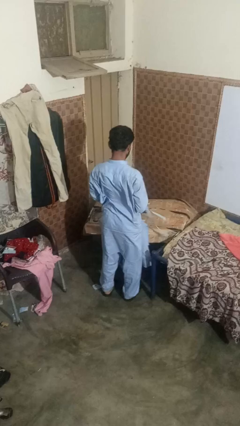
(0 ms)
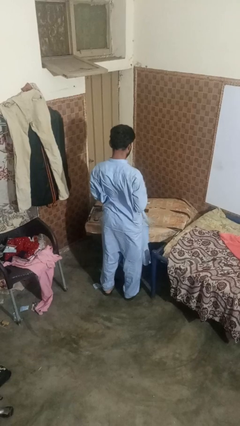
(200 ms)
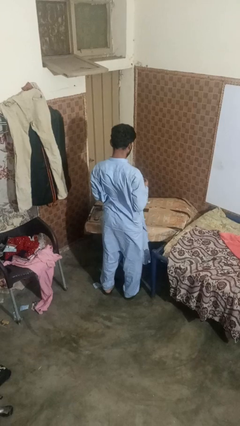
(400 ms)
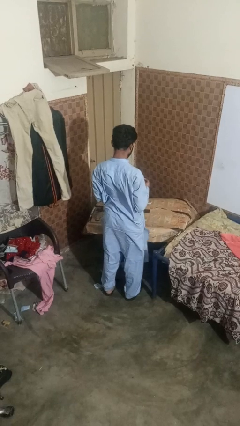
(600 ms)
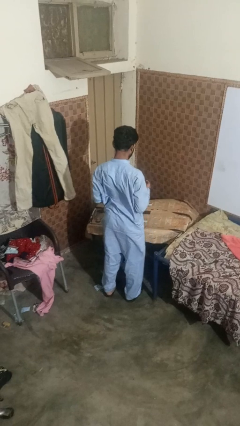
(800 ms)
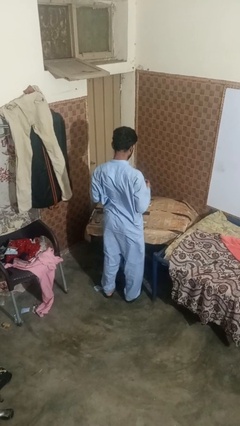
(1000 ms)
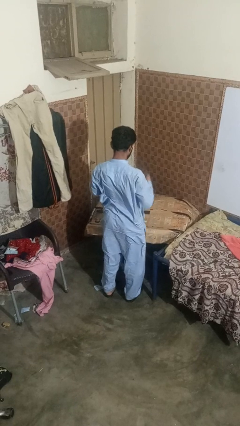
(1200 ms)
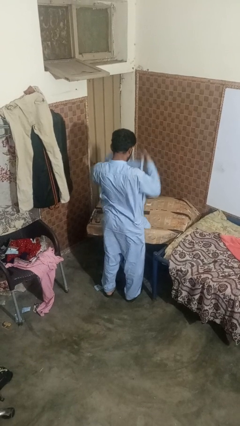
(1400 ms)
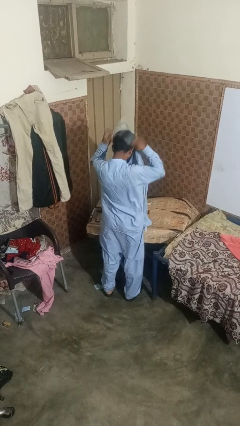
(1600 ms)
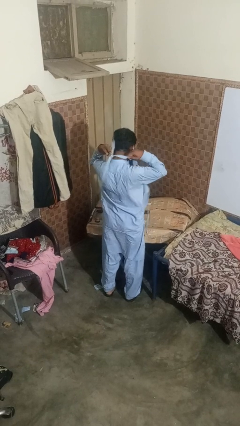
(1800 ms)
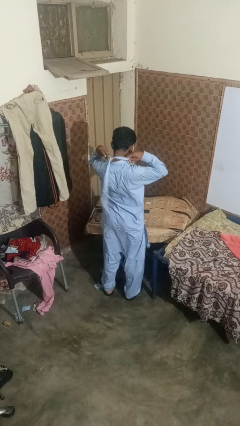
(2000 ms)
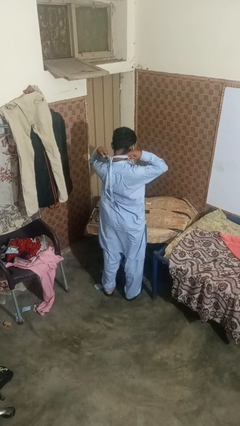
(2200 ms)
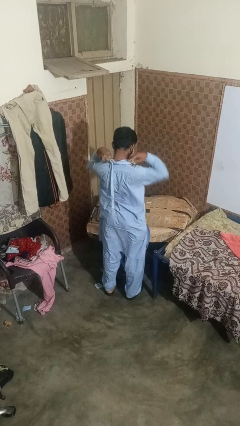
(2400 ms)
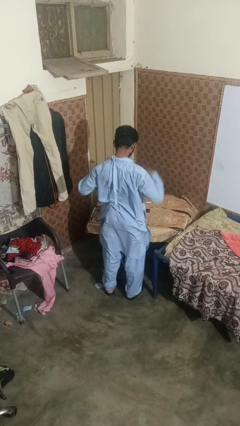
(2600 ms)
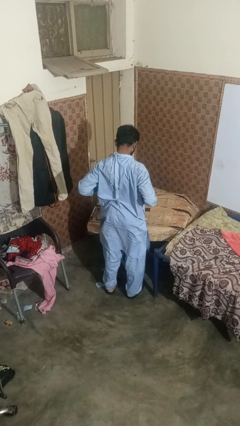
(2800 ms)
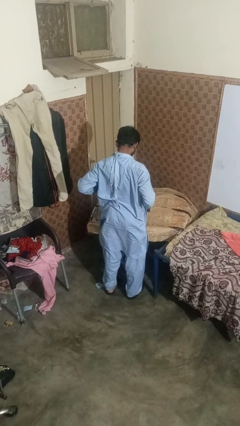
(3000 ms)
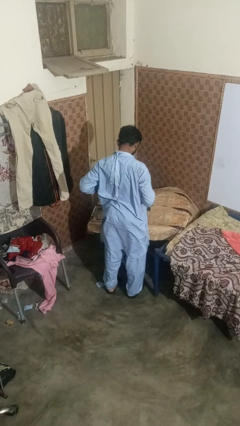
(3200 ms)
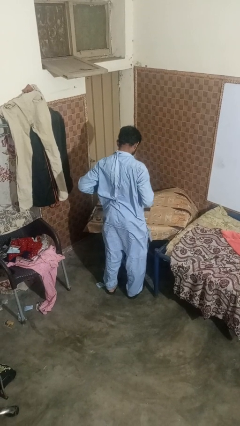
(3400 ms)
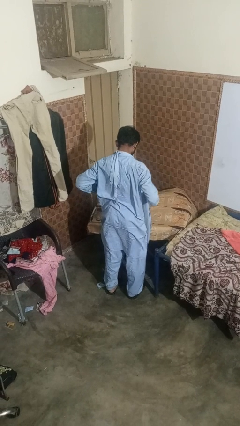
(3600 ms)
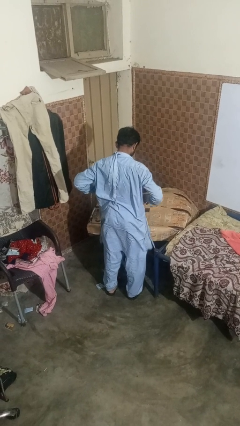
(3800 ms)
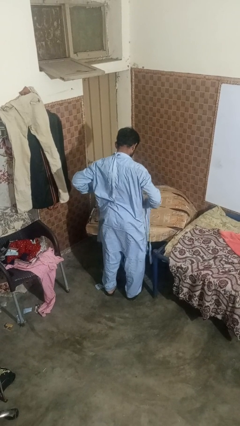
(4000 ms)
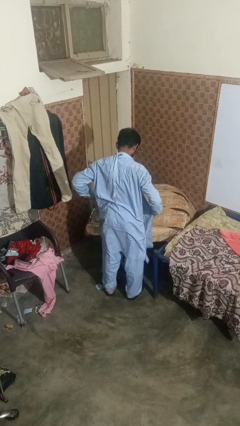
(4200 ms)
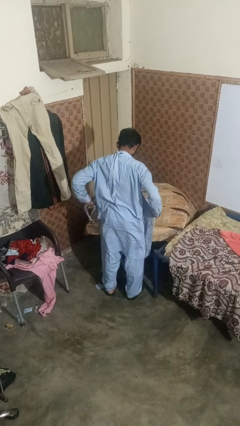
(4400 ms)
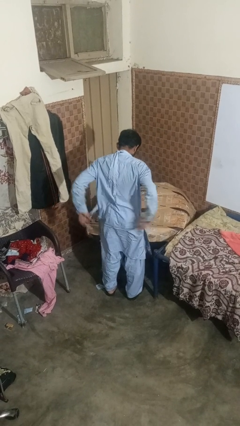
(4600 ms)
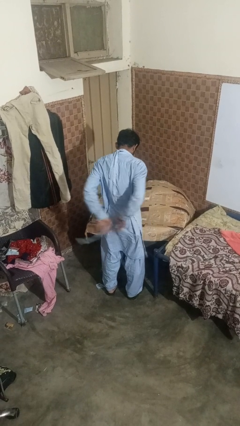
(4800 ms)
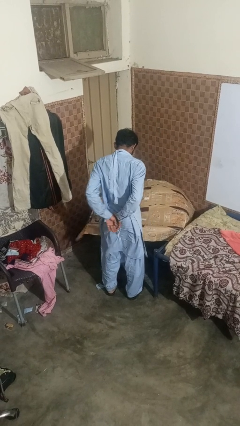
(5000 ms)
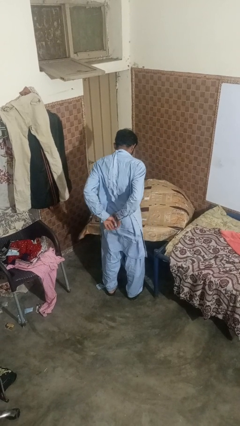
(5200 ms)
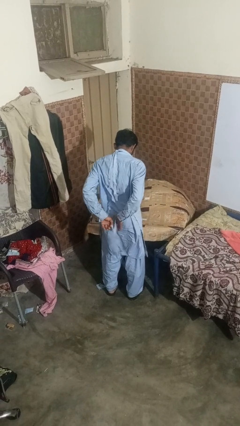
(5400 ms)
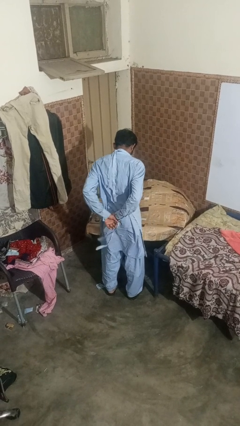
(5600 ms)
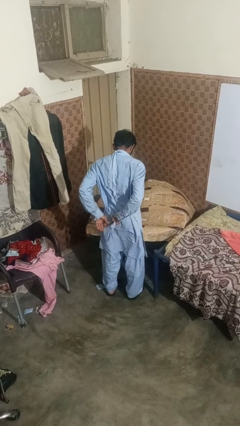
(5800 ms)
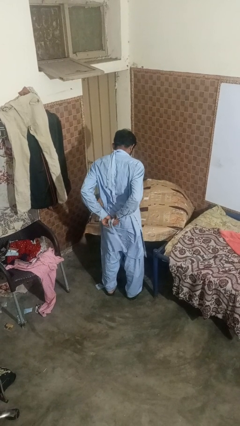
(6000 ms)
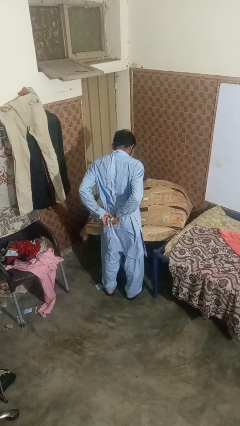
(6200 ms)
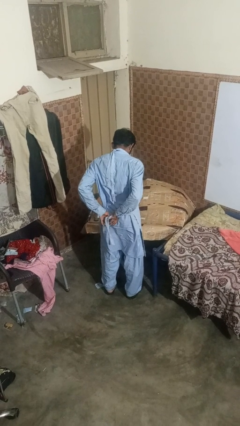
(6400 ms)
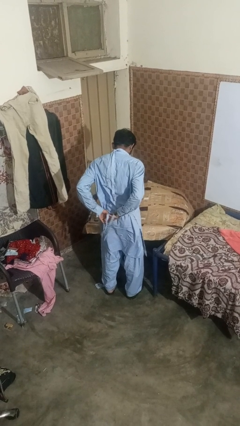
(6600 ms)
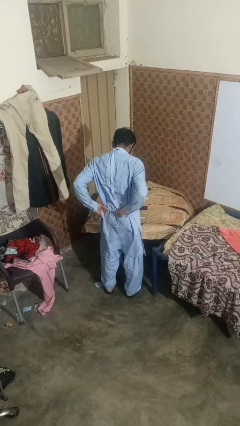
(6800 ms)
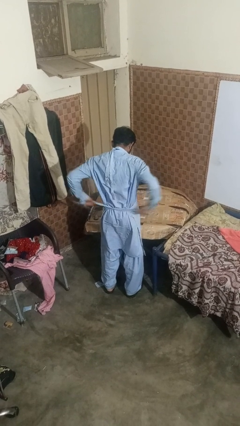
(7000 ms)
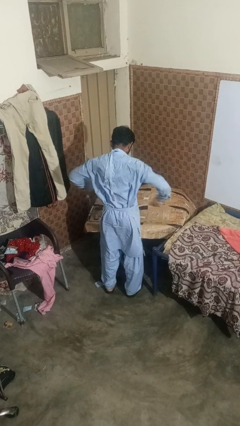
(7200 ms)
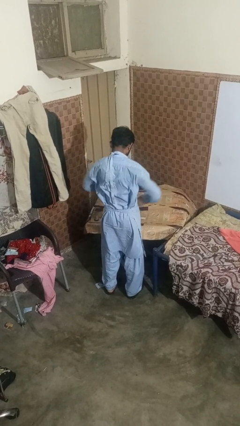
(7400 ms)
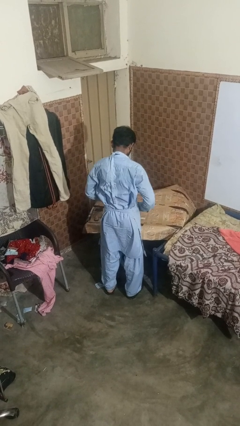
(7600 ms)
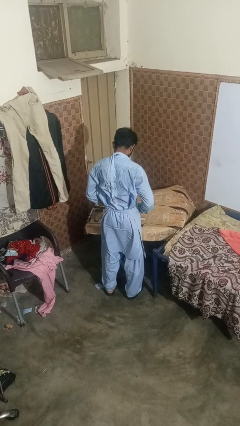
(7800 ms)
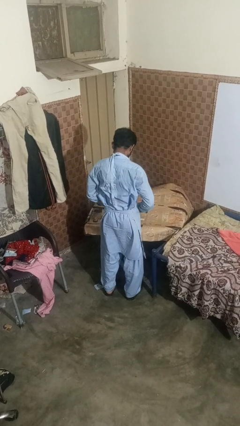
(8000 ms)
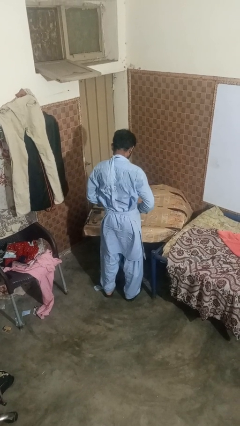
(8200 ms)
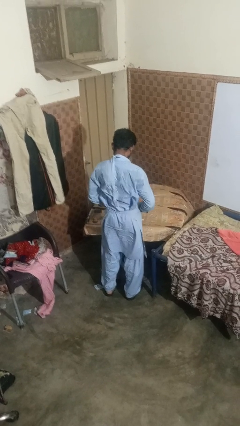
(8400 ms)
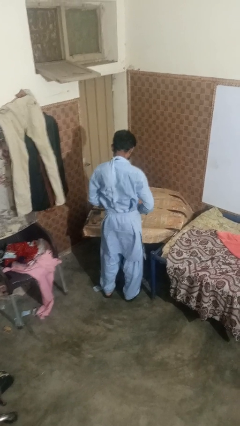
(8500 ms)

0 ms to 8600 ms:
person puts on apron

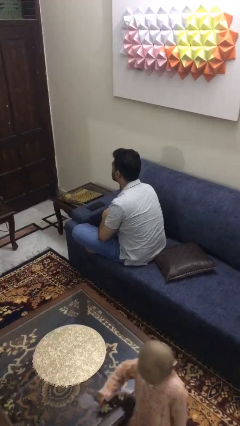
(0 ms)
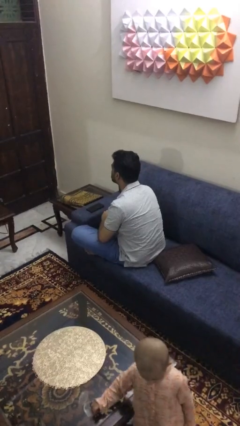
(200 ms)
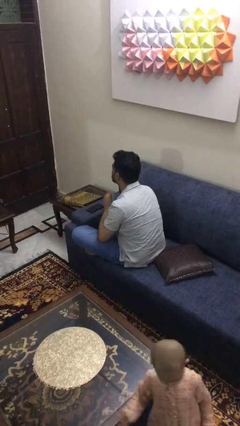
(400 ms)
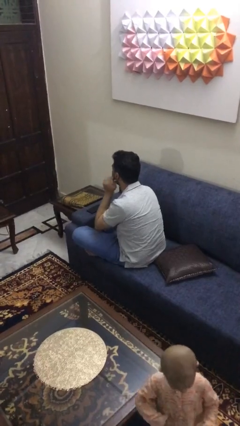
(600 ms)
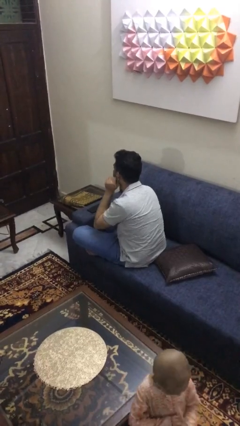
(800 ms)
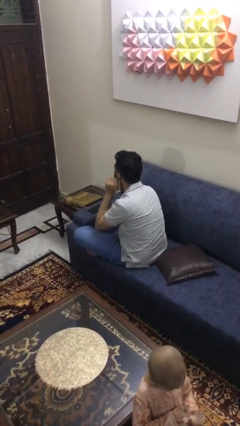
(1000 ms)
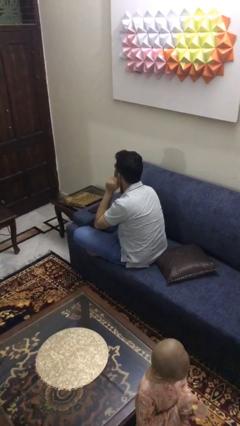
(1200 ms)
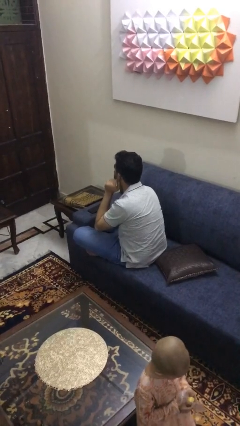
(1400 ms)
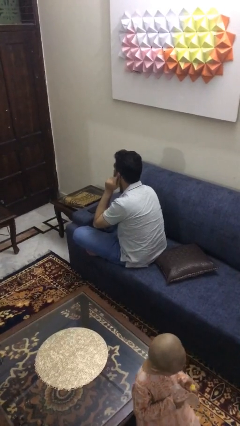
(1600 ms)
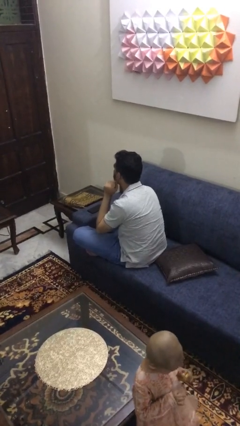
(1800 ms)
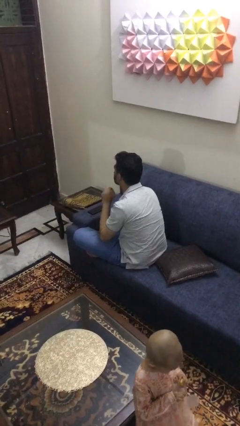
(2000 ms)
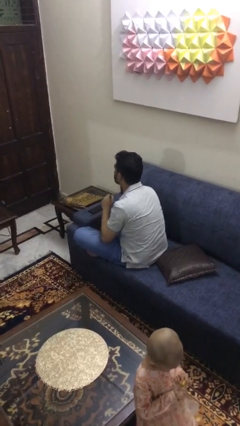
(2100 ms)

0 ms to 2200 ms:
person touches earlobe

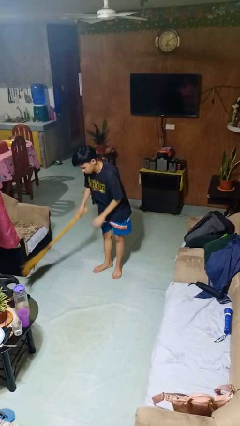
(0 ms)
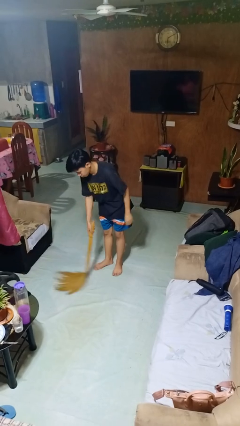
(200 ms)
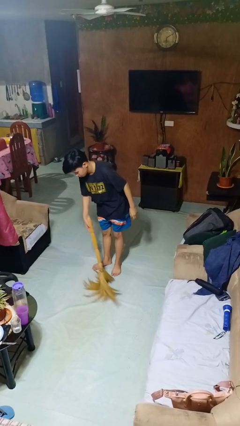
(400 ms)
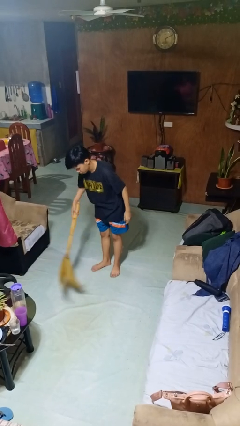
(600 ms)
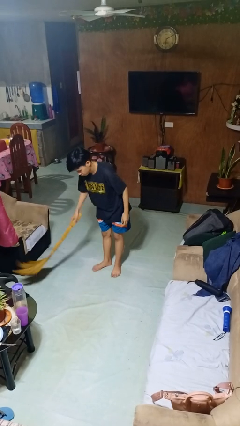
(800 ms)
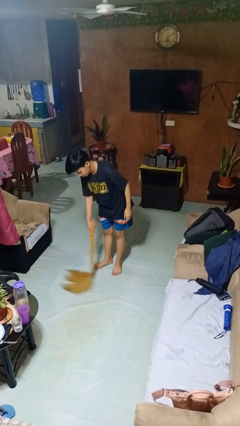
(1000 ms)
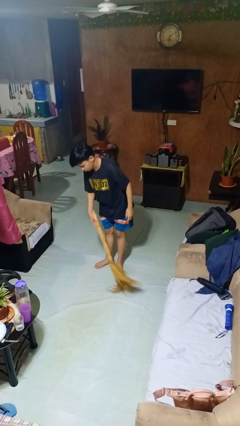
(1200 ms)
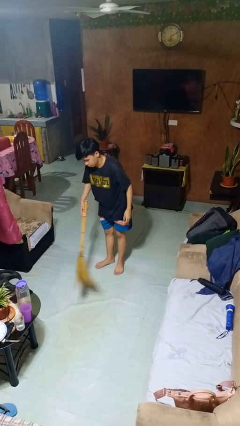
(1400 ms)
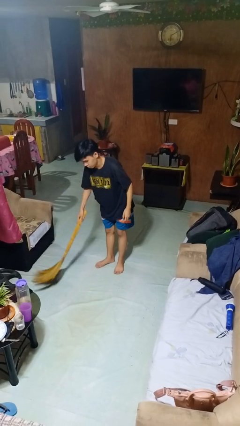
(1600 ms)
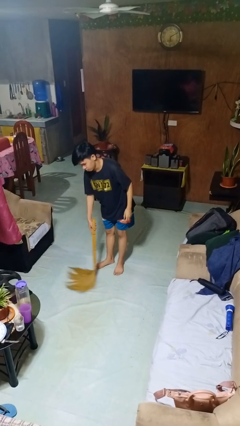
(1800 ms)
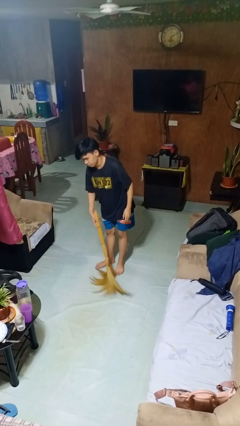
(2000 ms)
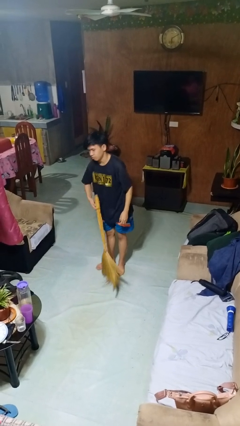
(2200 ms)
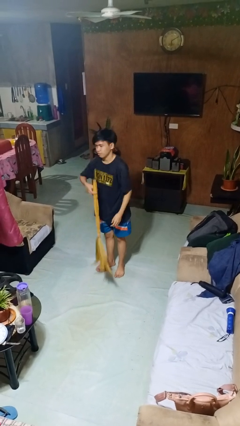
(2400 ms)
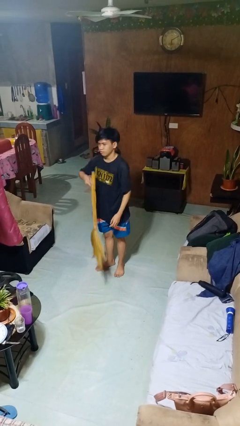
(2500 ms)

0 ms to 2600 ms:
person sweeps floor

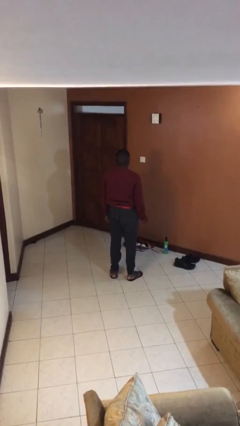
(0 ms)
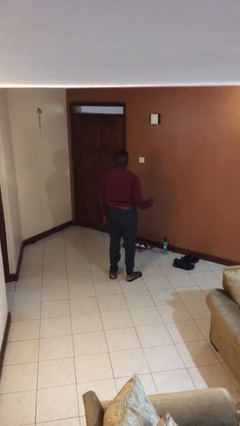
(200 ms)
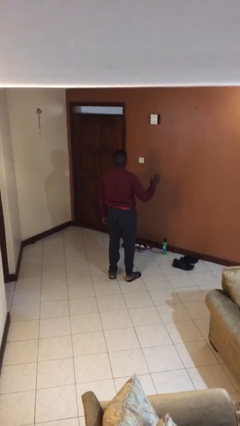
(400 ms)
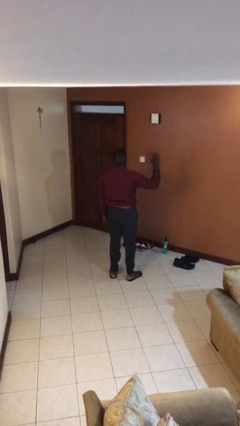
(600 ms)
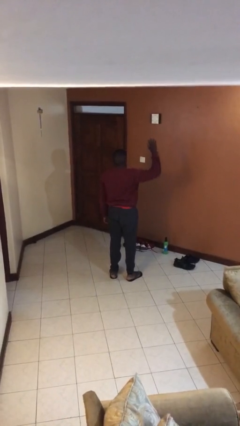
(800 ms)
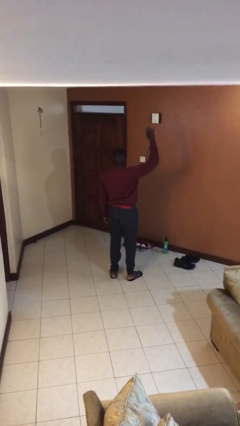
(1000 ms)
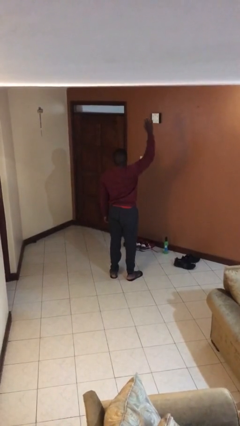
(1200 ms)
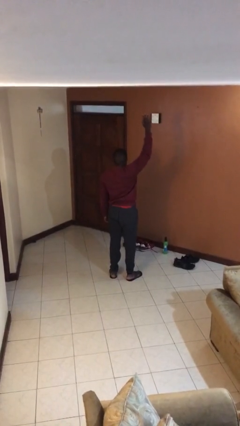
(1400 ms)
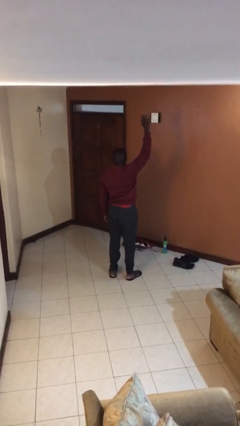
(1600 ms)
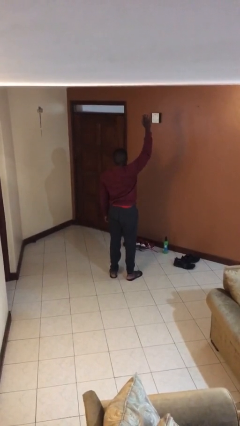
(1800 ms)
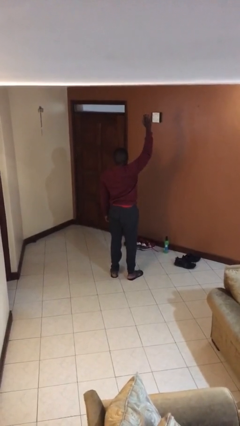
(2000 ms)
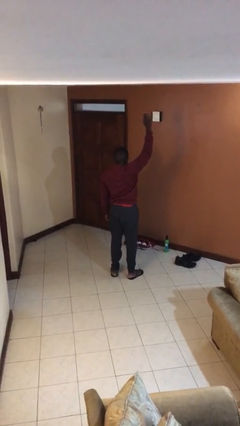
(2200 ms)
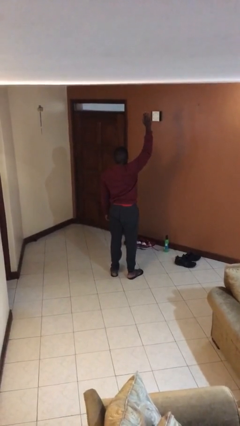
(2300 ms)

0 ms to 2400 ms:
person gestures raise hand

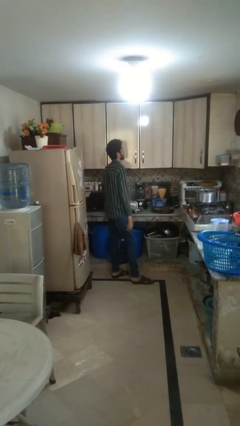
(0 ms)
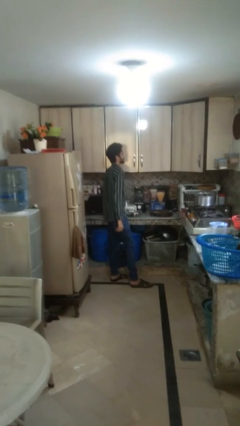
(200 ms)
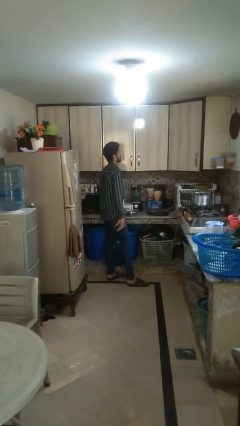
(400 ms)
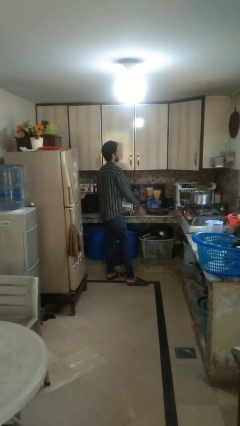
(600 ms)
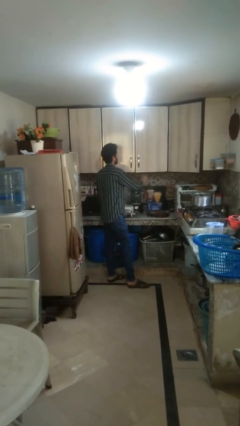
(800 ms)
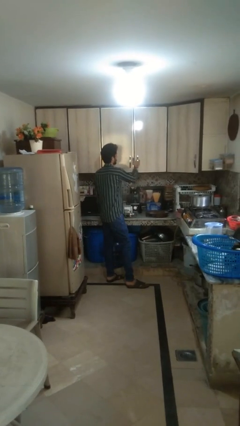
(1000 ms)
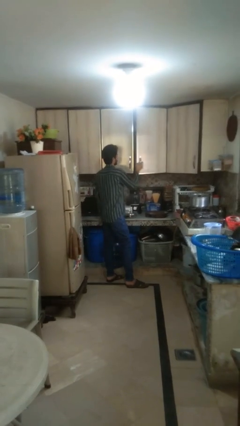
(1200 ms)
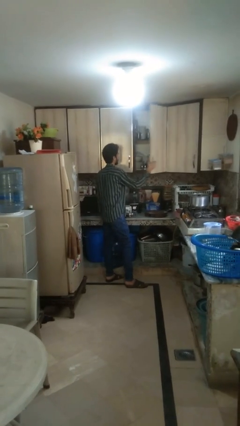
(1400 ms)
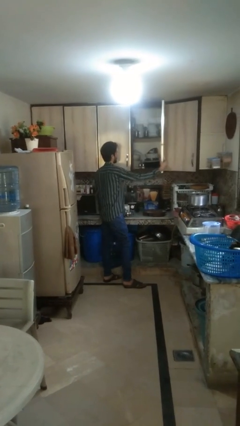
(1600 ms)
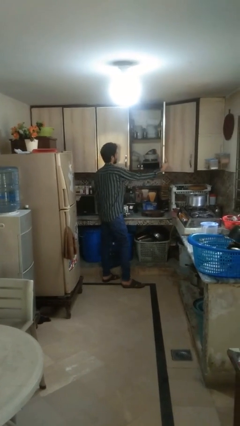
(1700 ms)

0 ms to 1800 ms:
person opens cabinet
